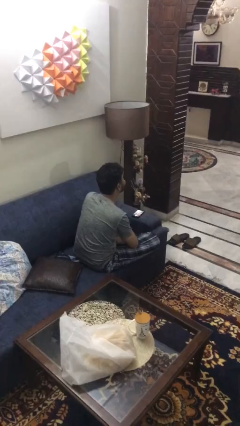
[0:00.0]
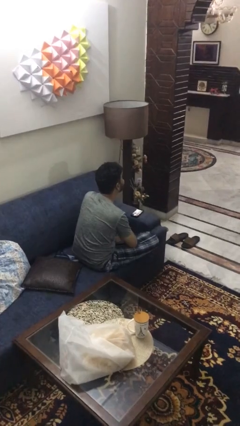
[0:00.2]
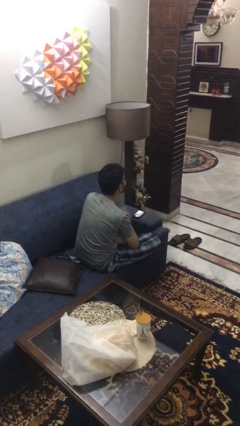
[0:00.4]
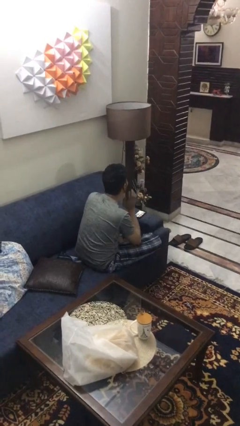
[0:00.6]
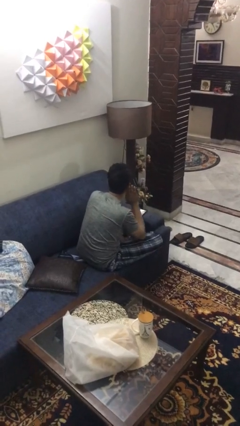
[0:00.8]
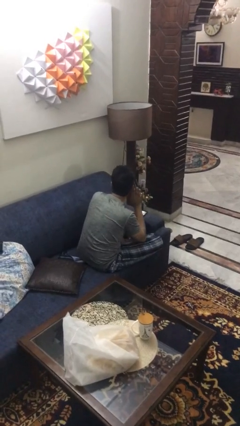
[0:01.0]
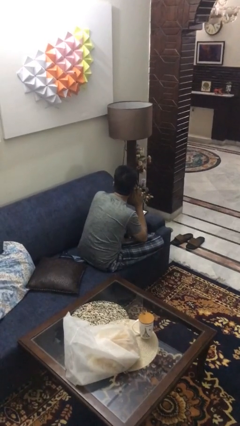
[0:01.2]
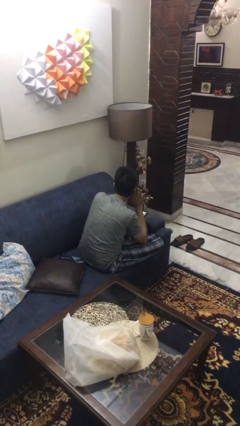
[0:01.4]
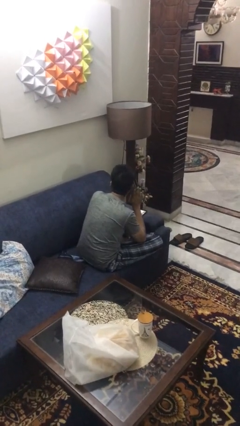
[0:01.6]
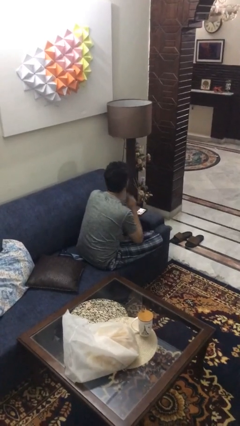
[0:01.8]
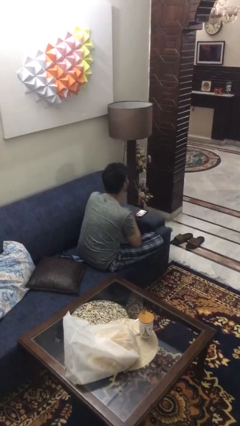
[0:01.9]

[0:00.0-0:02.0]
person gestures listen closely

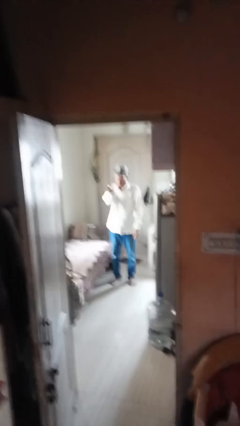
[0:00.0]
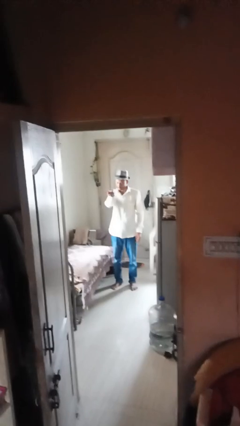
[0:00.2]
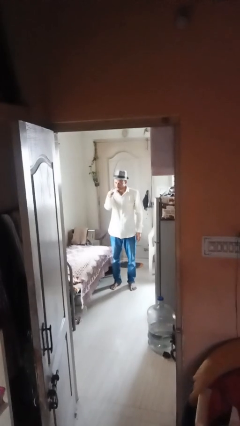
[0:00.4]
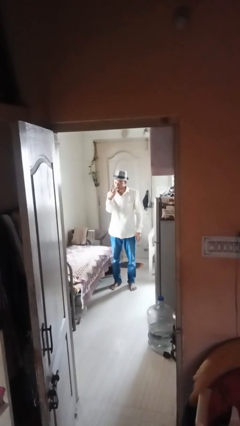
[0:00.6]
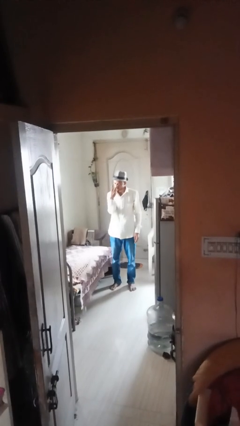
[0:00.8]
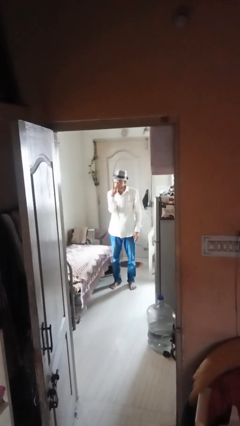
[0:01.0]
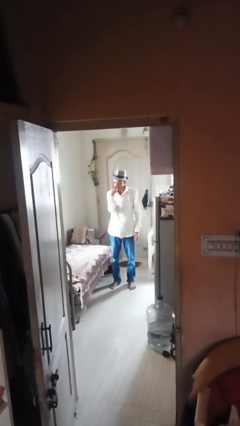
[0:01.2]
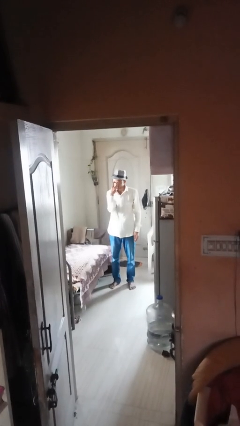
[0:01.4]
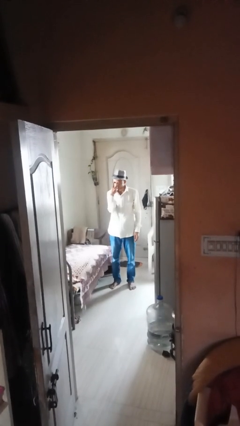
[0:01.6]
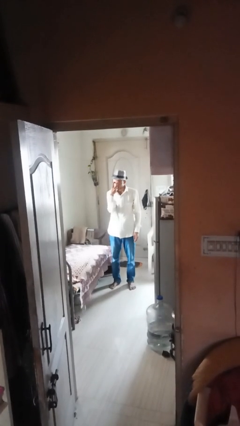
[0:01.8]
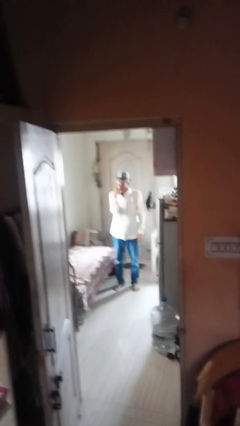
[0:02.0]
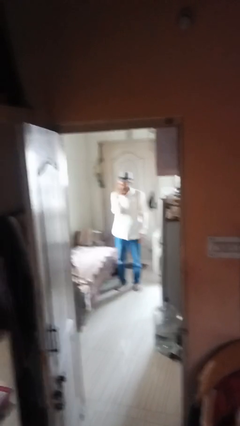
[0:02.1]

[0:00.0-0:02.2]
person gestures watch closely

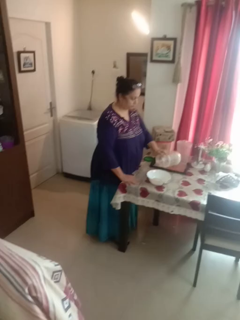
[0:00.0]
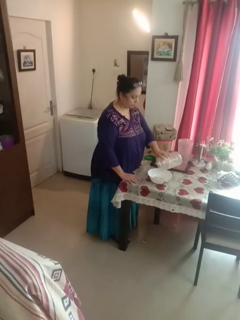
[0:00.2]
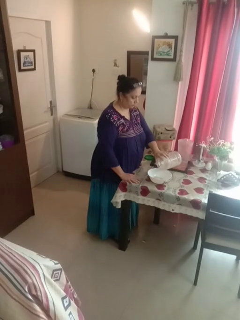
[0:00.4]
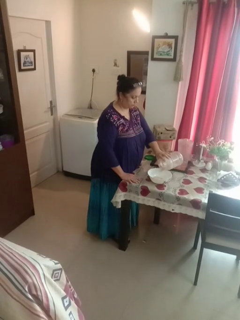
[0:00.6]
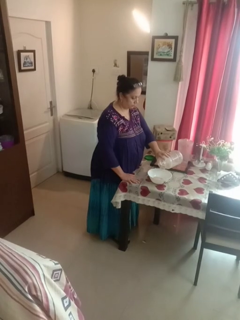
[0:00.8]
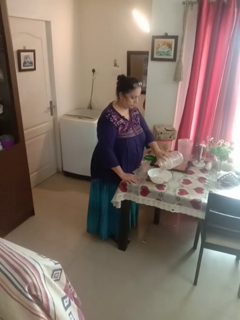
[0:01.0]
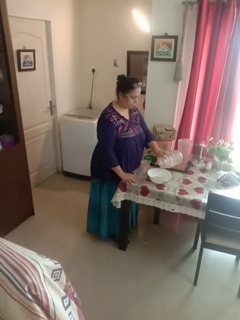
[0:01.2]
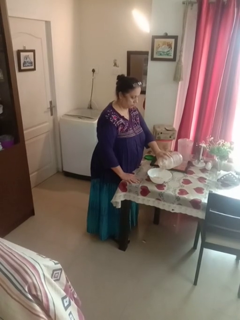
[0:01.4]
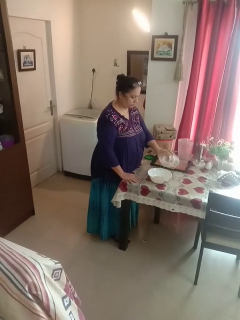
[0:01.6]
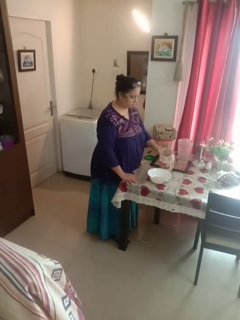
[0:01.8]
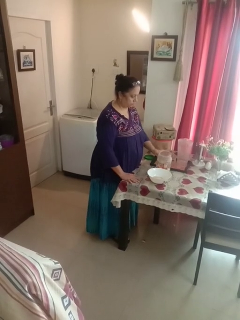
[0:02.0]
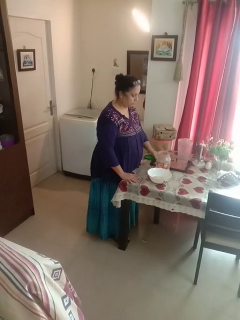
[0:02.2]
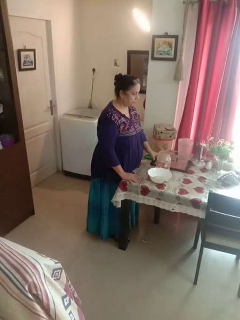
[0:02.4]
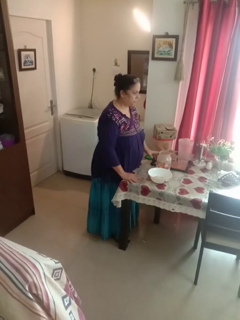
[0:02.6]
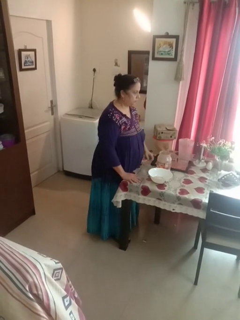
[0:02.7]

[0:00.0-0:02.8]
person pours into bowl

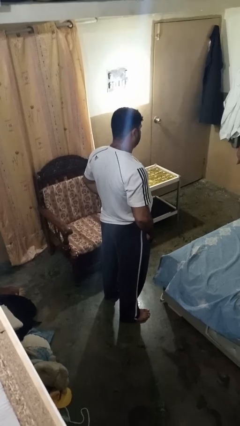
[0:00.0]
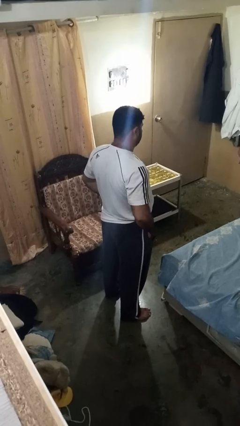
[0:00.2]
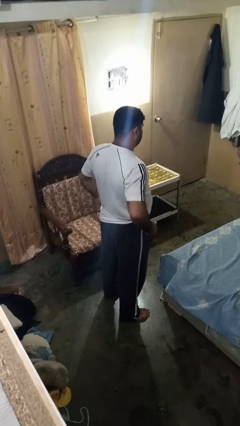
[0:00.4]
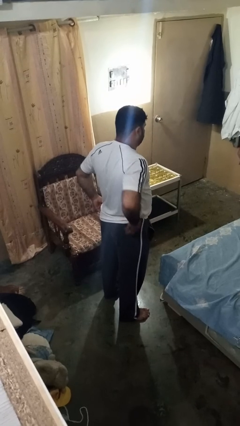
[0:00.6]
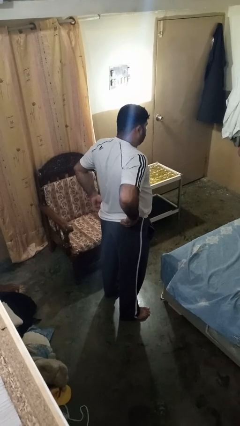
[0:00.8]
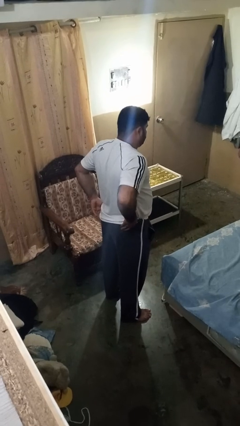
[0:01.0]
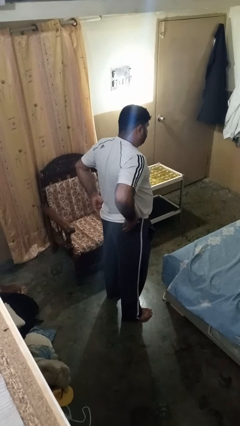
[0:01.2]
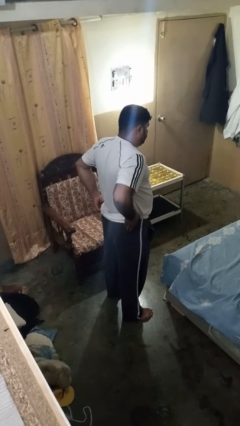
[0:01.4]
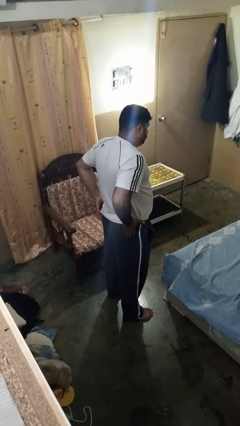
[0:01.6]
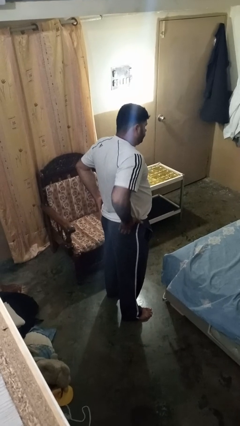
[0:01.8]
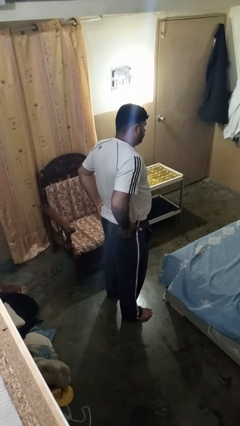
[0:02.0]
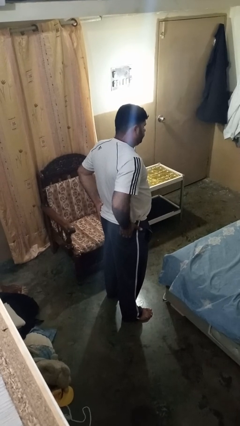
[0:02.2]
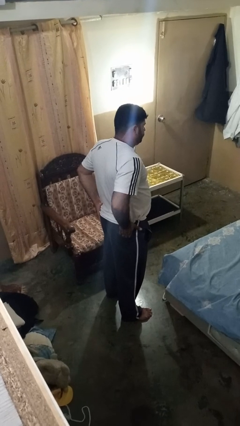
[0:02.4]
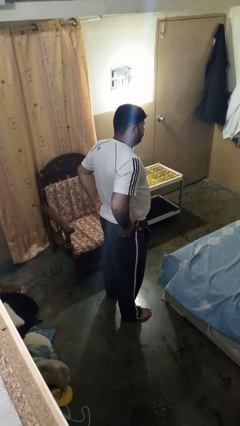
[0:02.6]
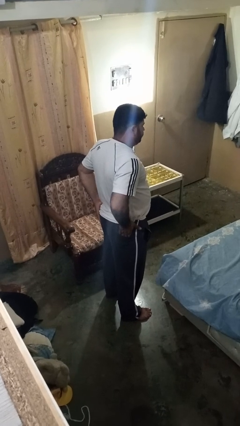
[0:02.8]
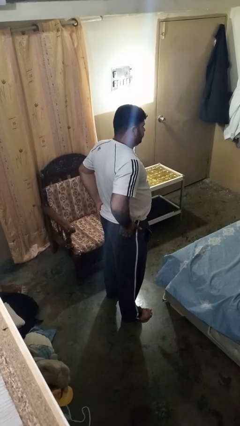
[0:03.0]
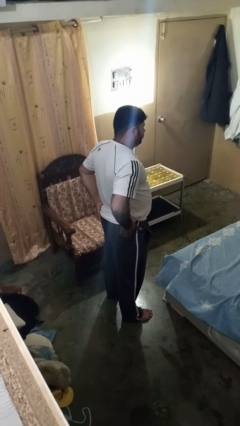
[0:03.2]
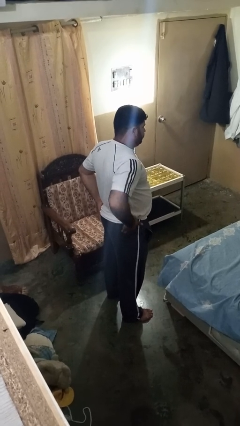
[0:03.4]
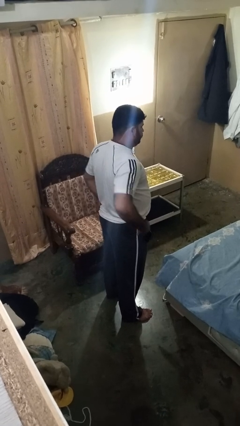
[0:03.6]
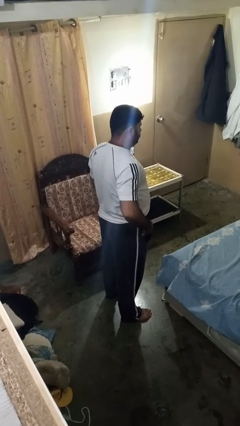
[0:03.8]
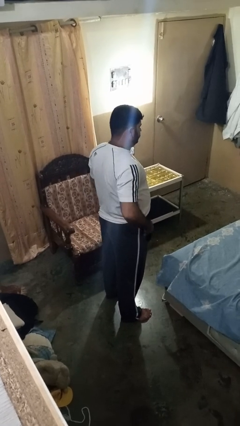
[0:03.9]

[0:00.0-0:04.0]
person puts hands in back pockets

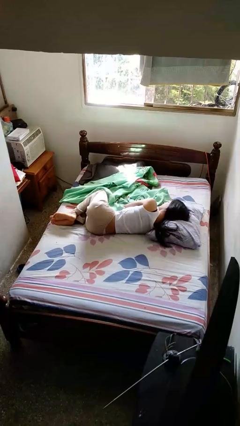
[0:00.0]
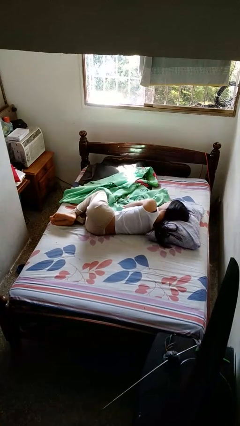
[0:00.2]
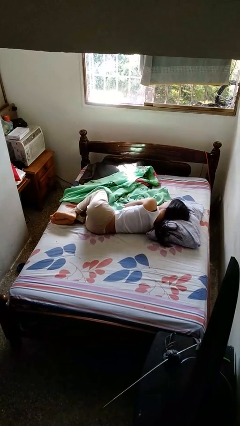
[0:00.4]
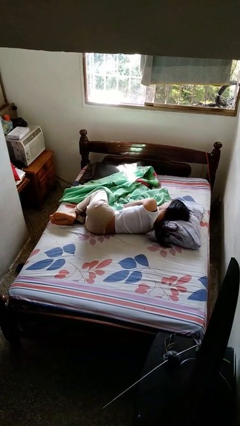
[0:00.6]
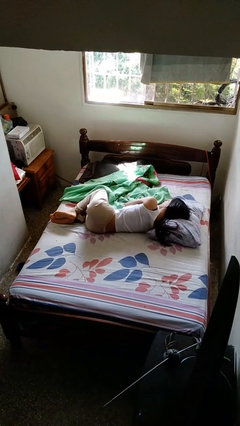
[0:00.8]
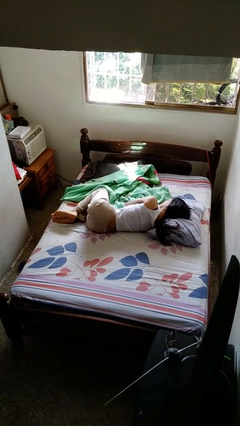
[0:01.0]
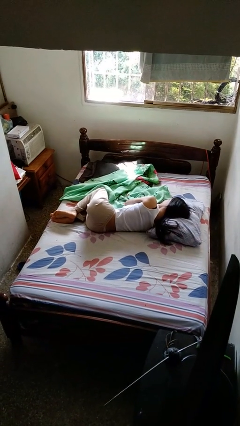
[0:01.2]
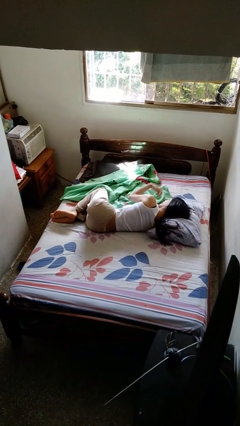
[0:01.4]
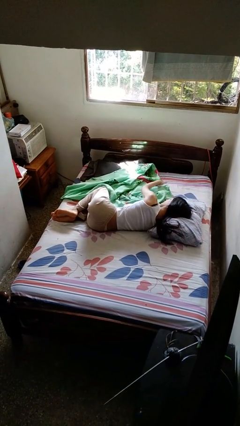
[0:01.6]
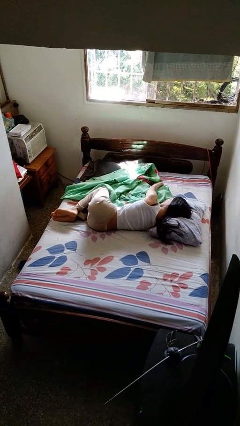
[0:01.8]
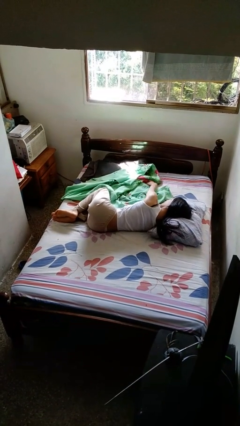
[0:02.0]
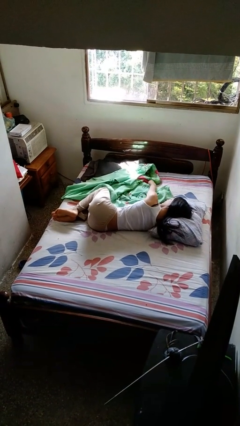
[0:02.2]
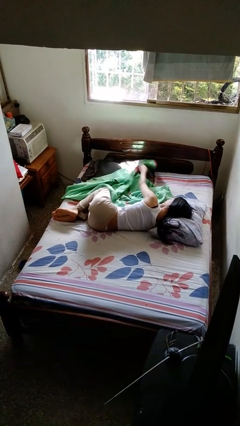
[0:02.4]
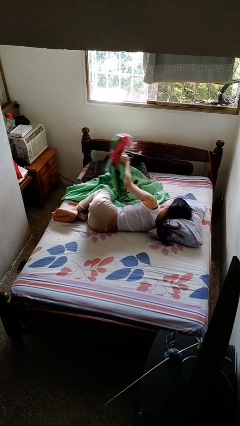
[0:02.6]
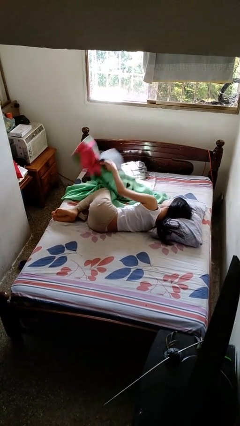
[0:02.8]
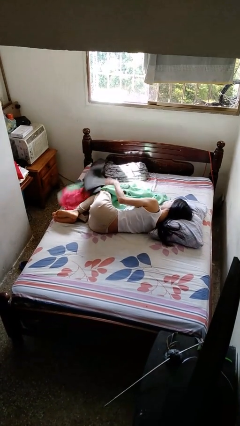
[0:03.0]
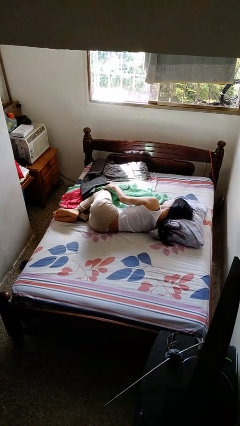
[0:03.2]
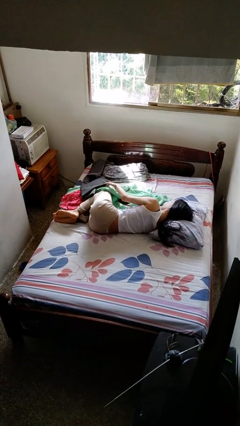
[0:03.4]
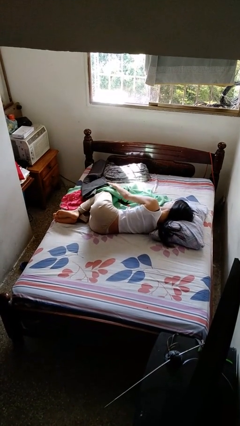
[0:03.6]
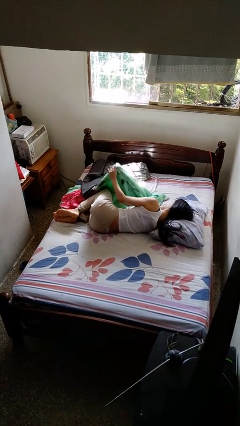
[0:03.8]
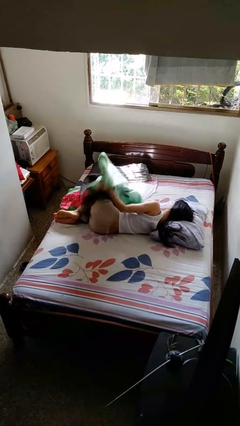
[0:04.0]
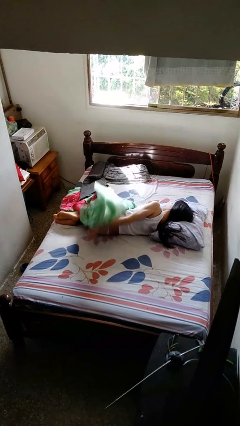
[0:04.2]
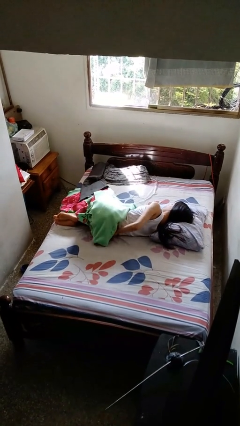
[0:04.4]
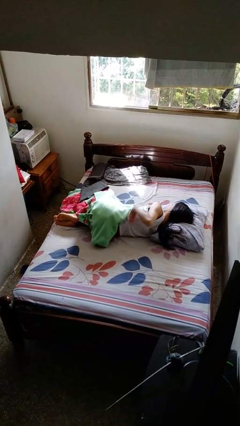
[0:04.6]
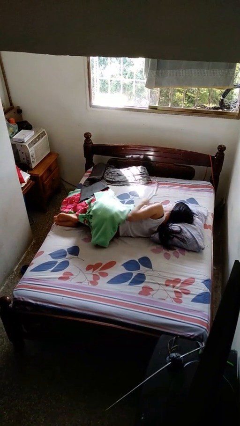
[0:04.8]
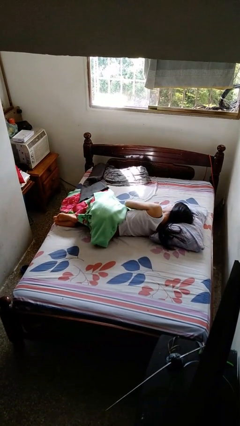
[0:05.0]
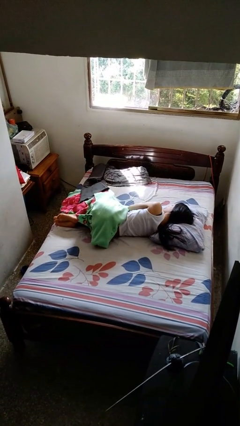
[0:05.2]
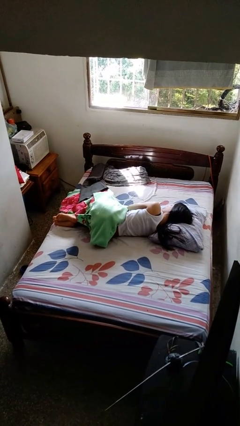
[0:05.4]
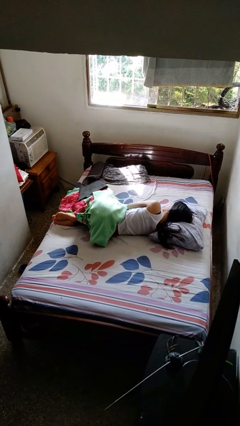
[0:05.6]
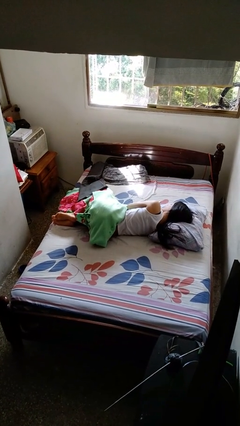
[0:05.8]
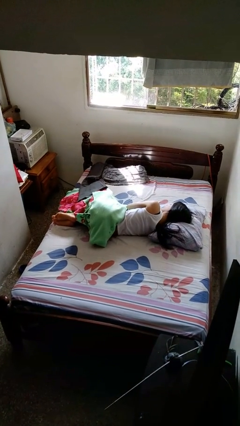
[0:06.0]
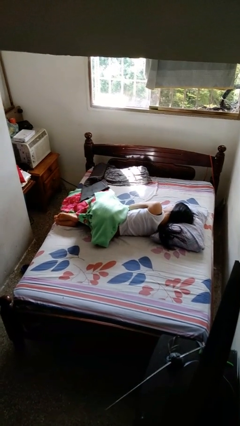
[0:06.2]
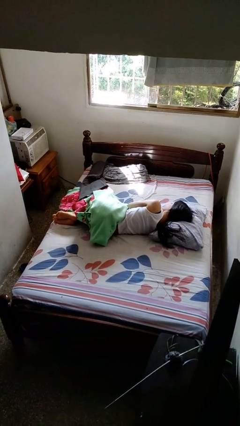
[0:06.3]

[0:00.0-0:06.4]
person covers with bedsheets

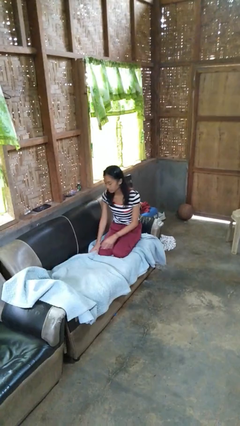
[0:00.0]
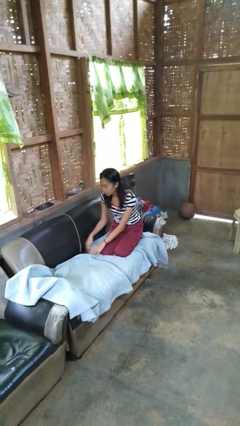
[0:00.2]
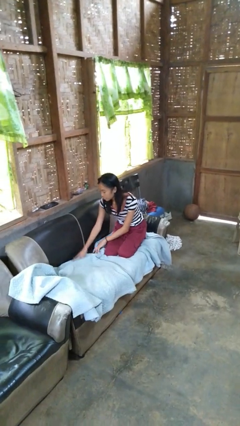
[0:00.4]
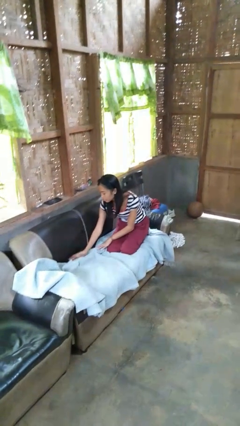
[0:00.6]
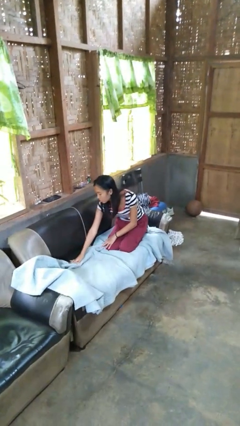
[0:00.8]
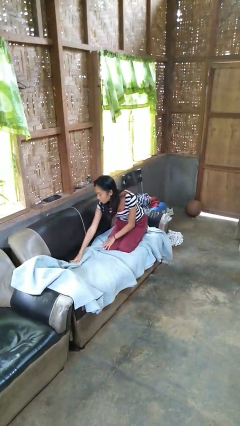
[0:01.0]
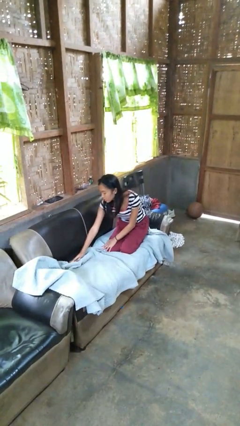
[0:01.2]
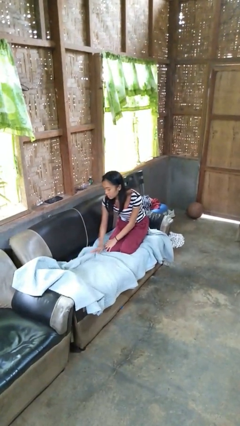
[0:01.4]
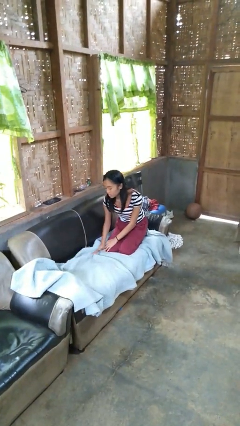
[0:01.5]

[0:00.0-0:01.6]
person searches in couch
